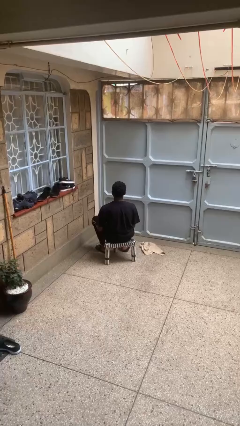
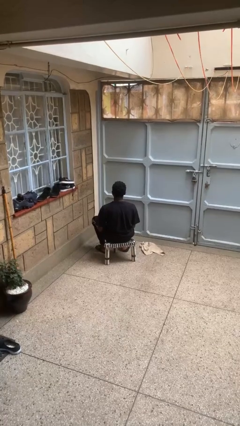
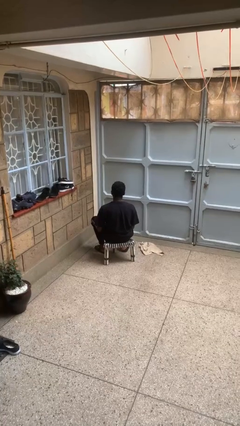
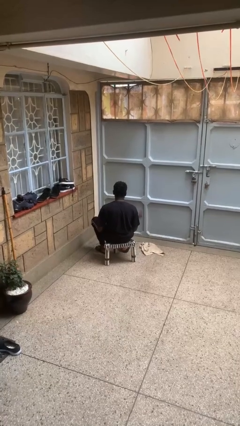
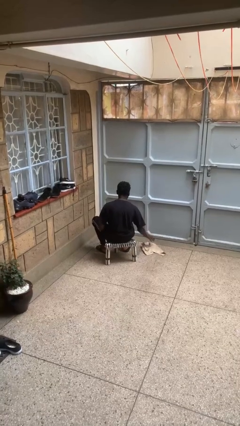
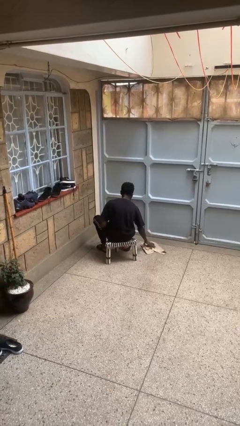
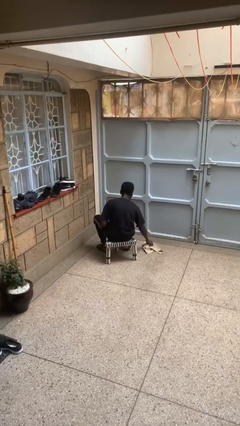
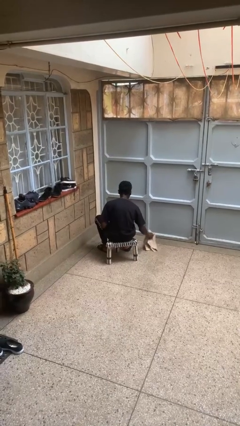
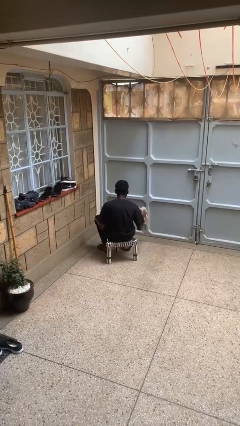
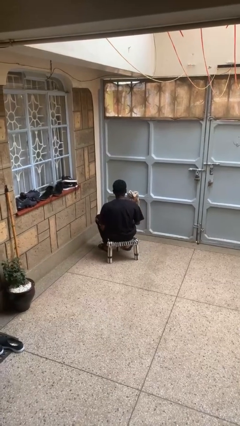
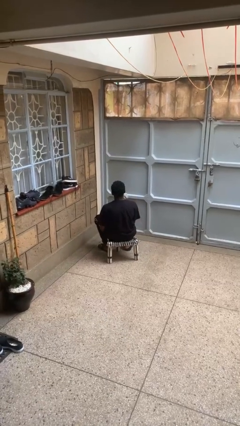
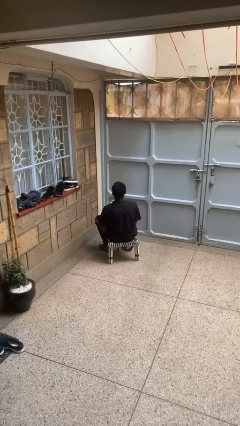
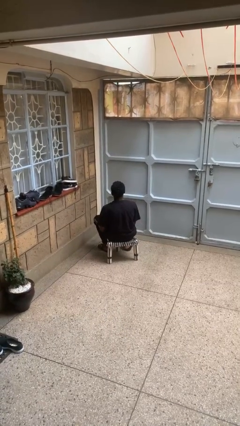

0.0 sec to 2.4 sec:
person picks up object from floor

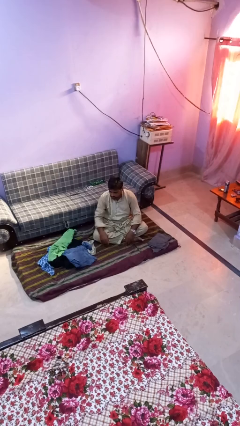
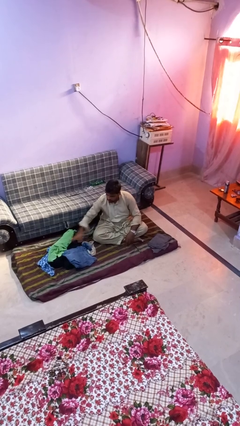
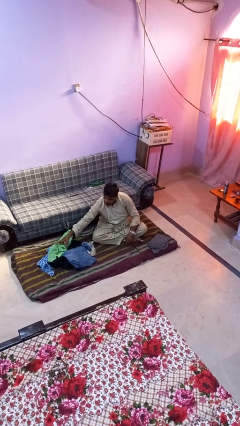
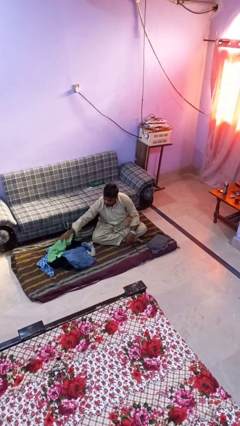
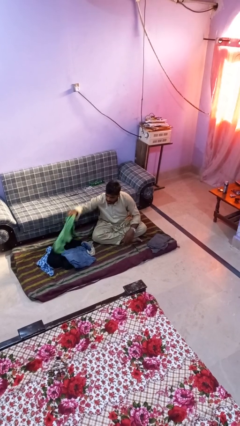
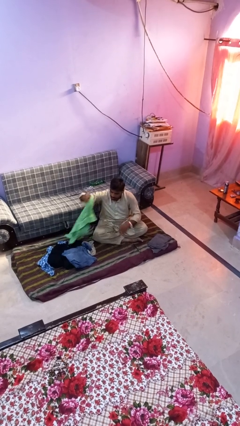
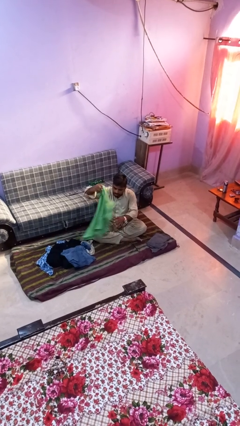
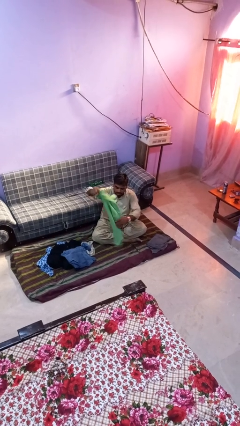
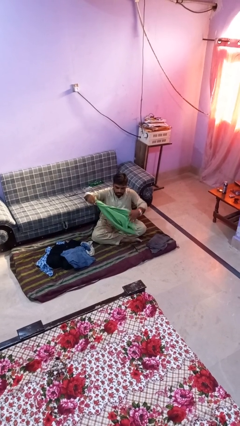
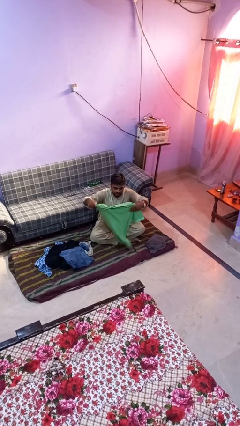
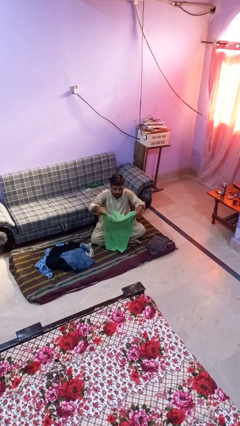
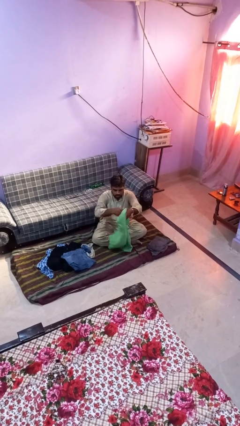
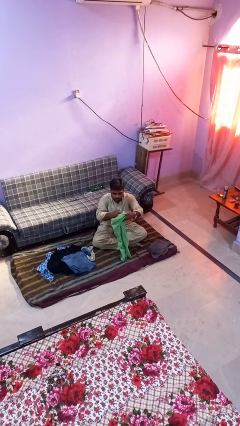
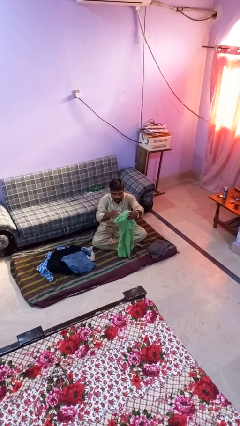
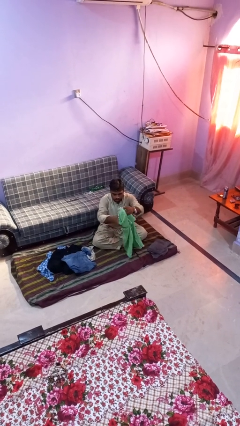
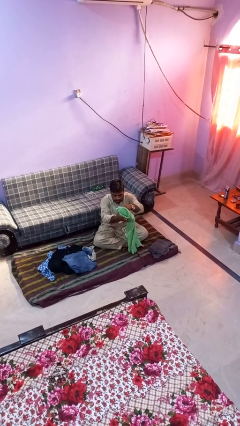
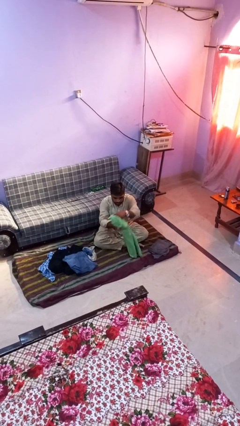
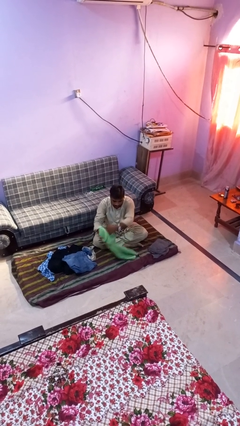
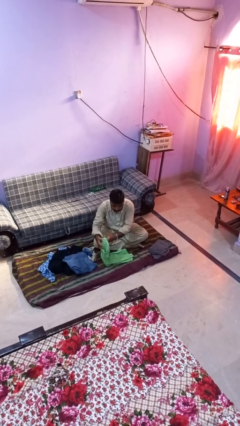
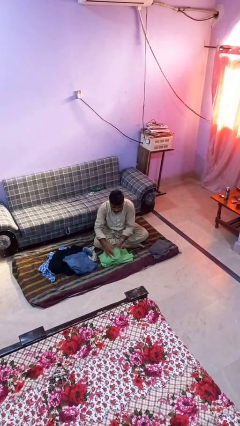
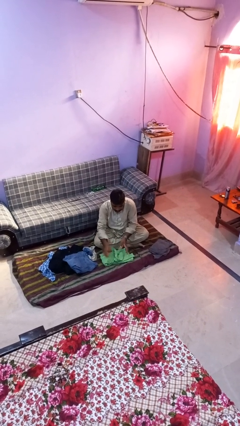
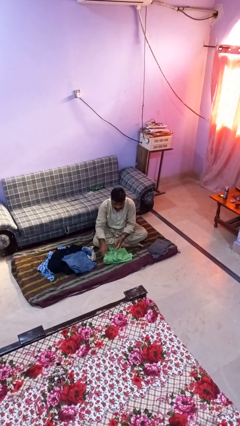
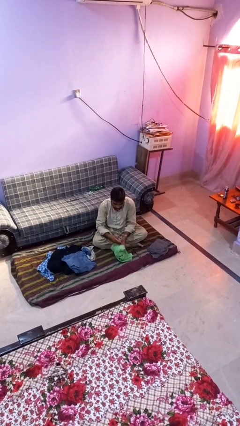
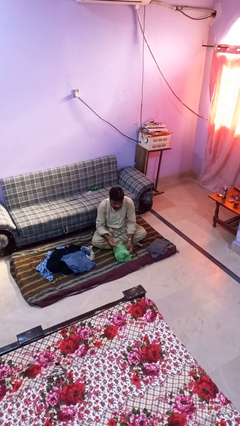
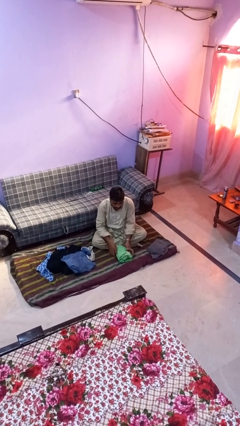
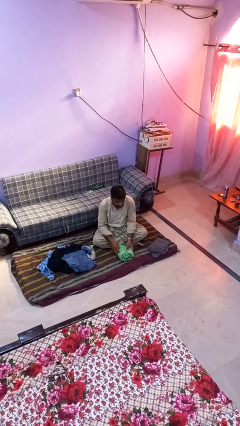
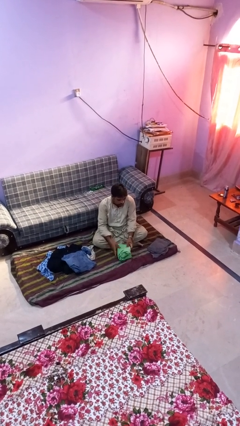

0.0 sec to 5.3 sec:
person folds shirt

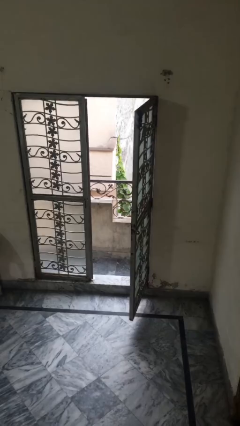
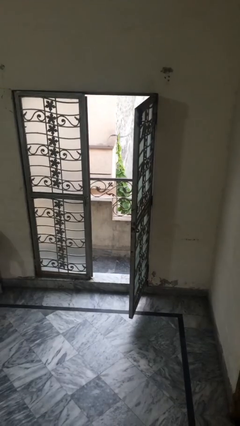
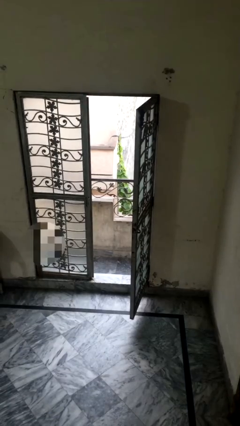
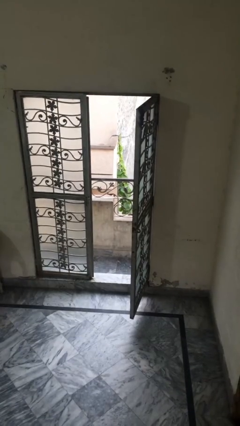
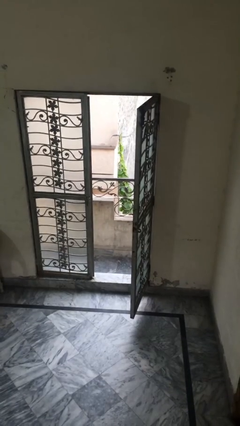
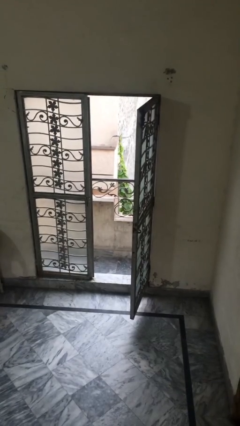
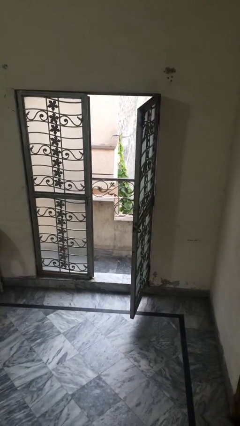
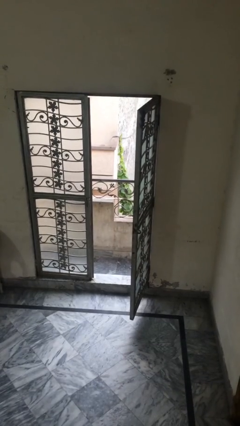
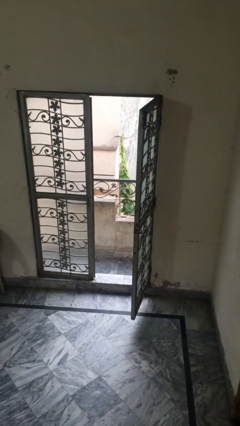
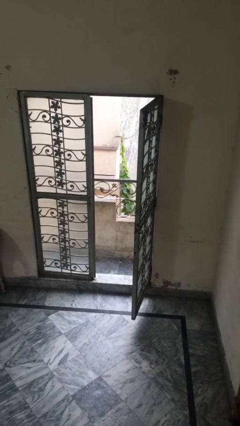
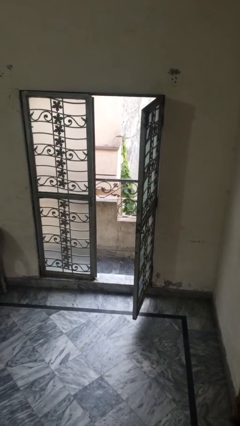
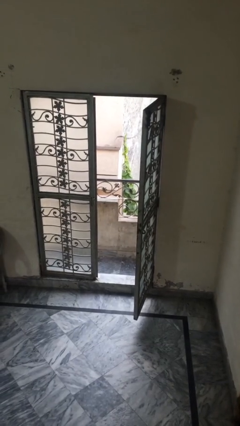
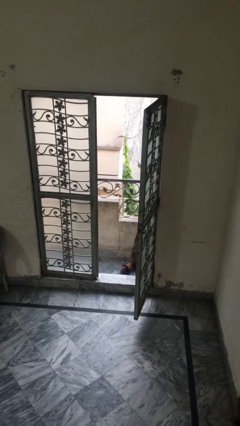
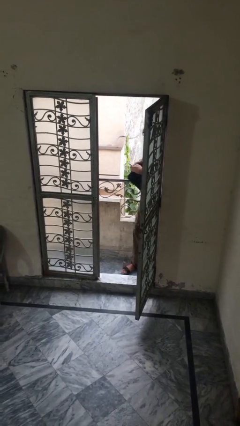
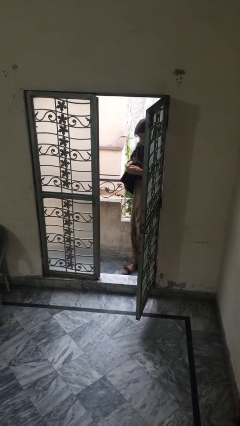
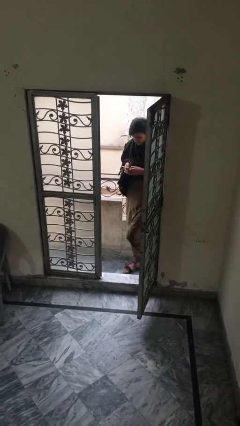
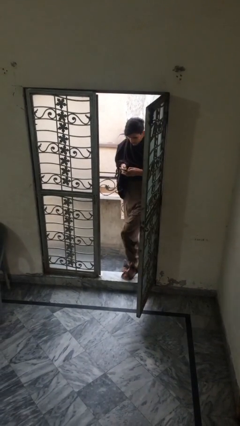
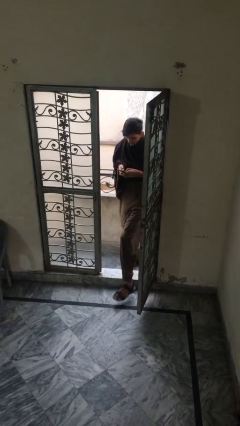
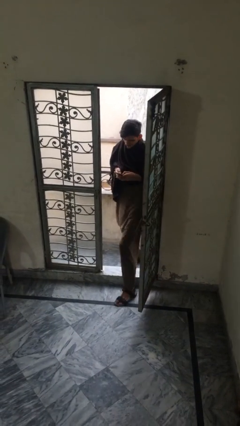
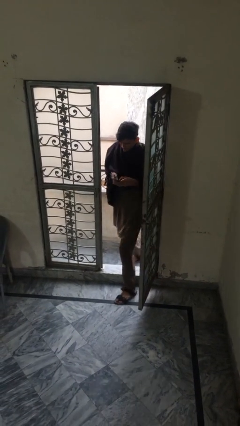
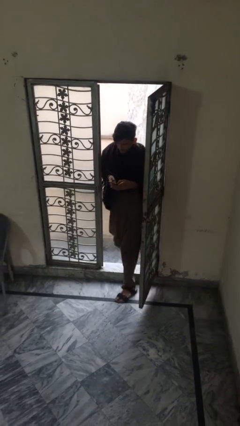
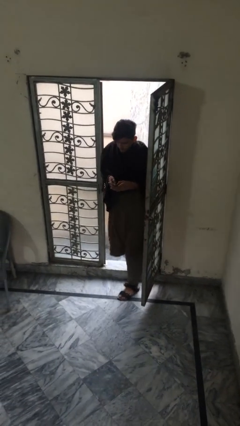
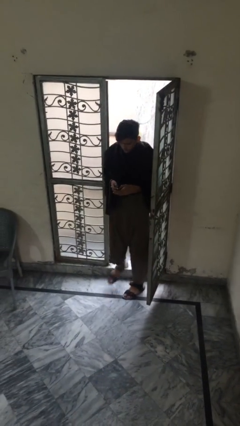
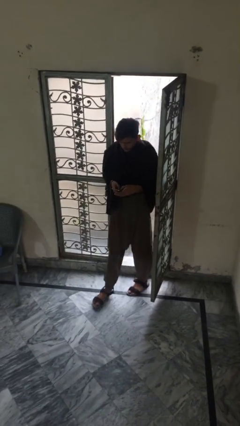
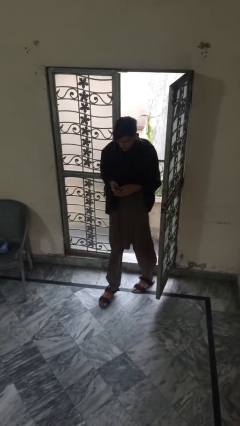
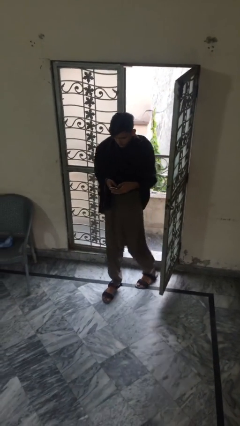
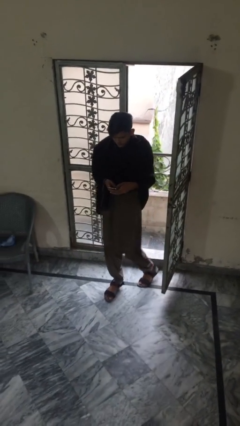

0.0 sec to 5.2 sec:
person enters scene through structure

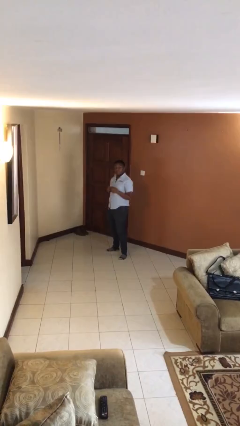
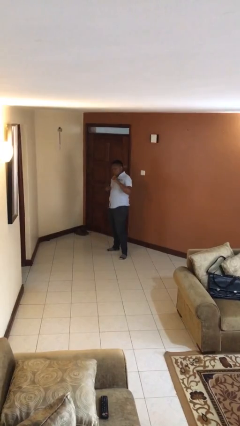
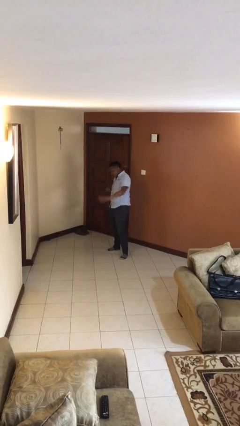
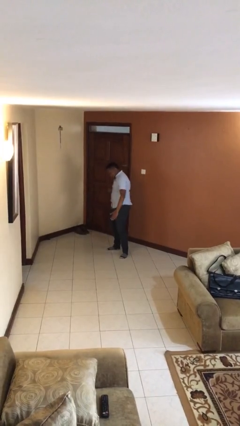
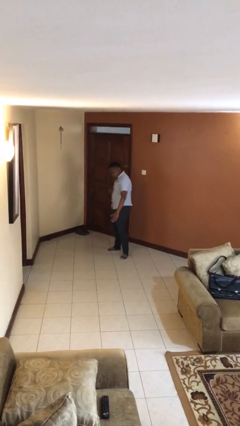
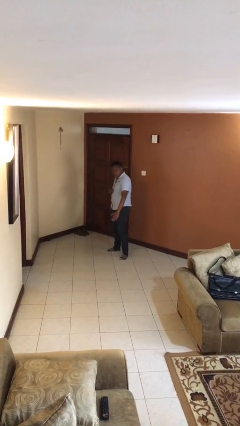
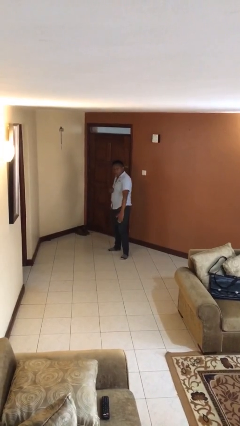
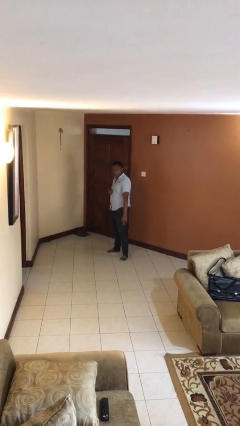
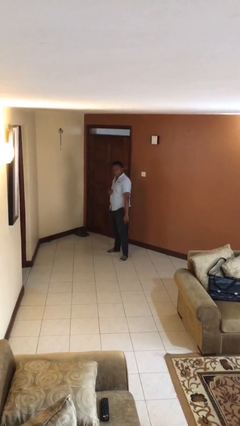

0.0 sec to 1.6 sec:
person karate chop

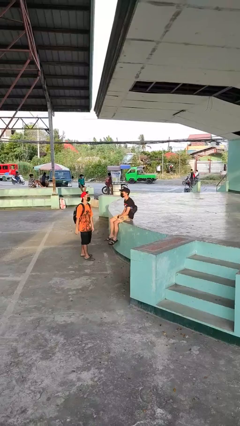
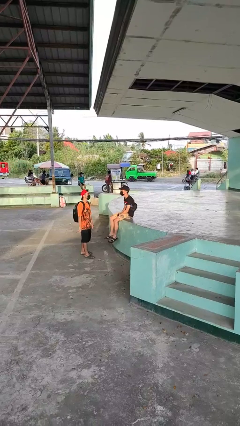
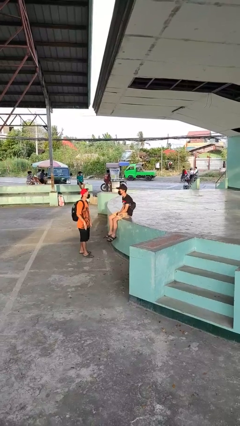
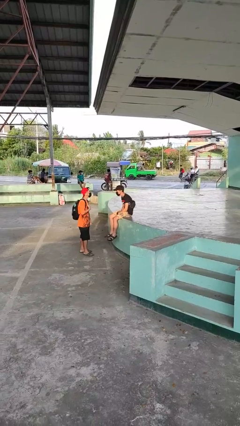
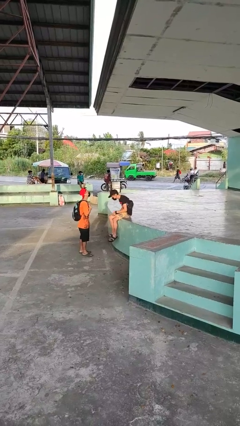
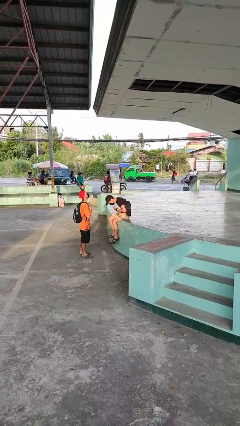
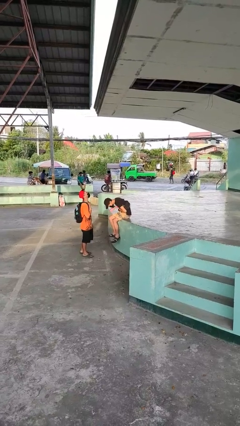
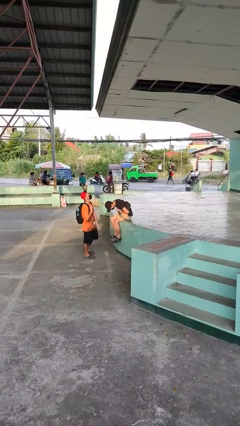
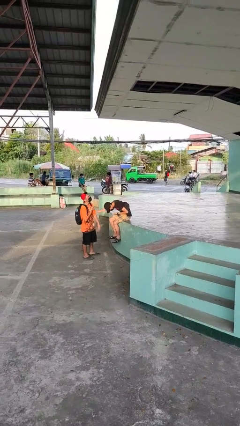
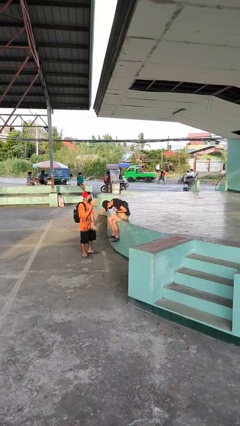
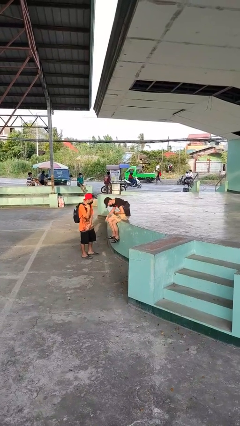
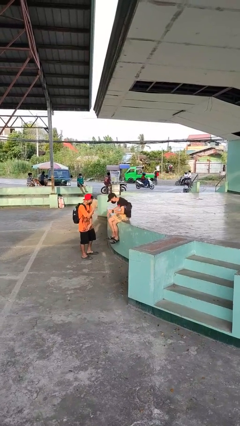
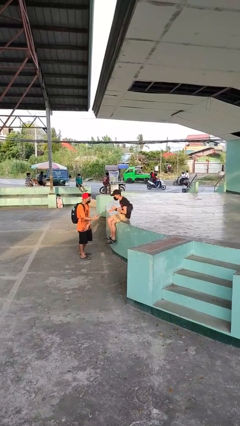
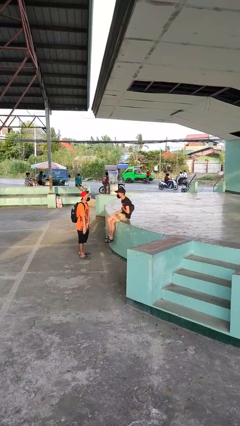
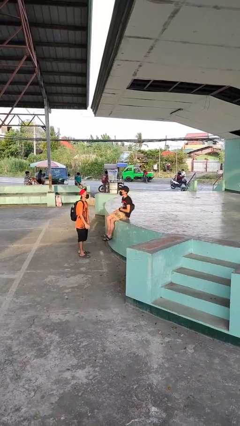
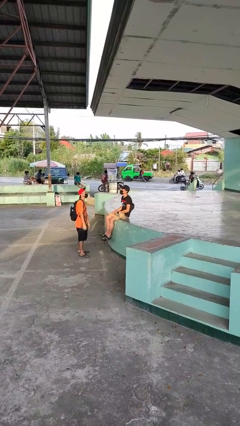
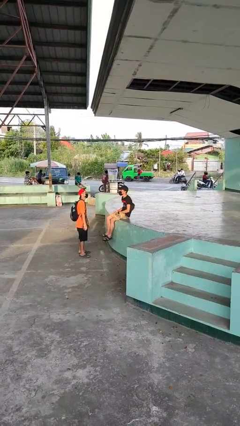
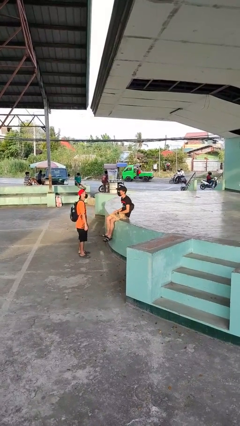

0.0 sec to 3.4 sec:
person laughs with person

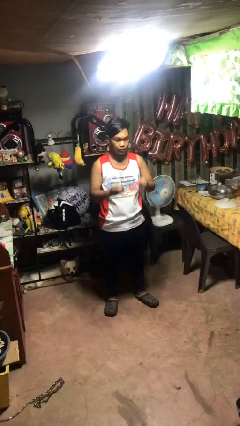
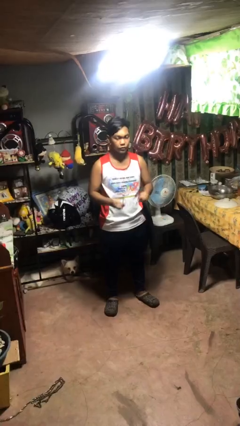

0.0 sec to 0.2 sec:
person takes off glasses
